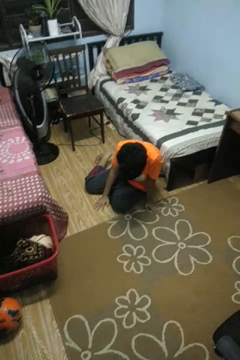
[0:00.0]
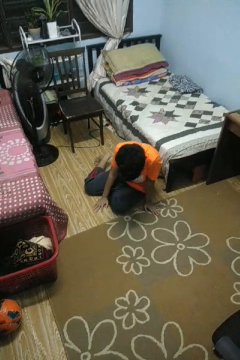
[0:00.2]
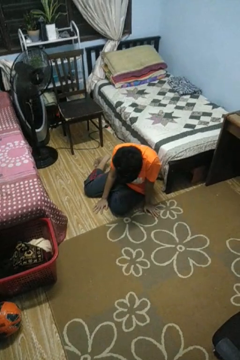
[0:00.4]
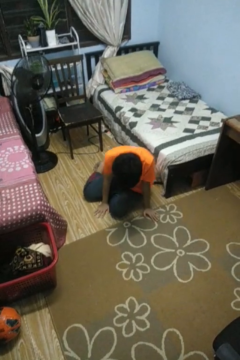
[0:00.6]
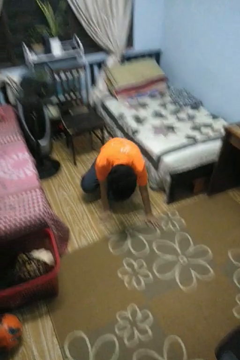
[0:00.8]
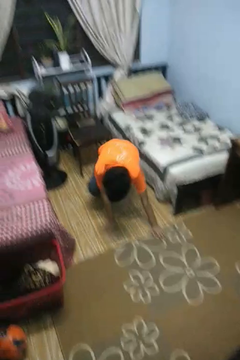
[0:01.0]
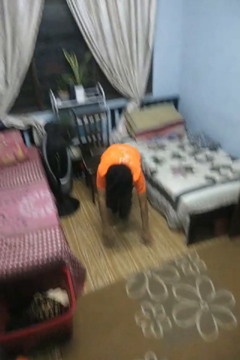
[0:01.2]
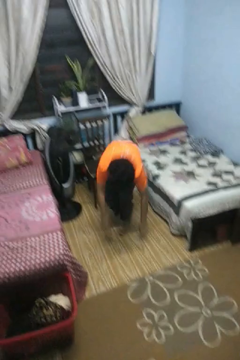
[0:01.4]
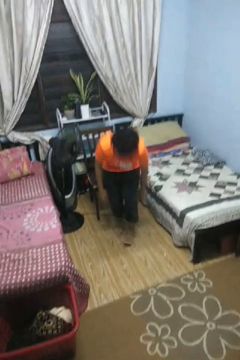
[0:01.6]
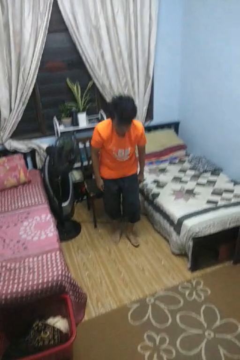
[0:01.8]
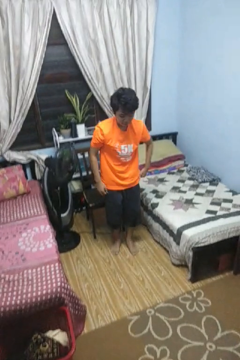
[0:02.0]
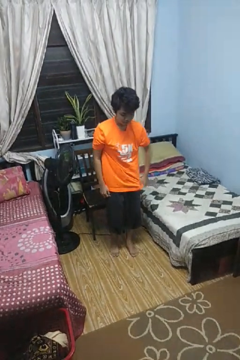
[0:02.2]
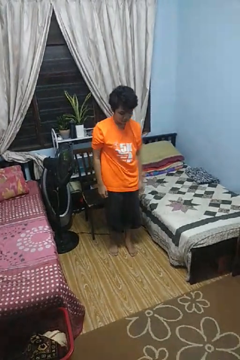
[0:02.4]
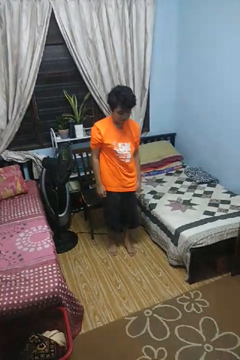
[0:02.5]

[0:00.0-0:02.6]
person stands up from floor

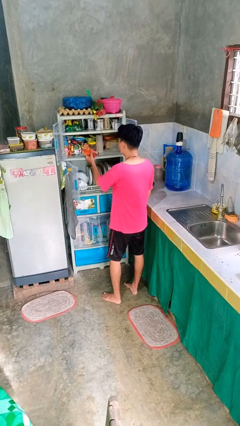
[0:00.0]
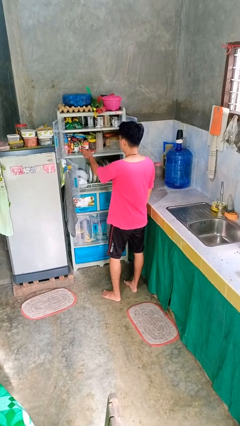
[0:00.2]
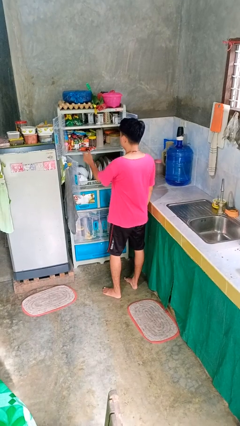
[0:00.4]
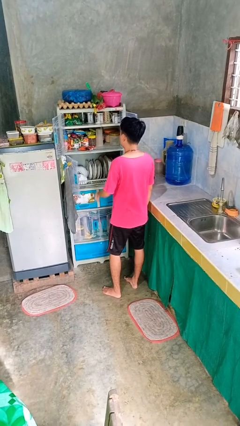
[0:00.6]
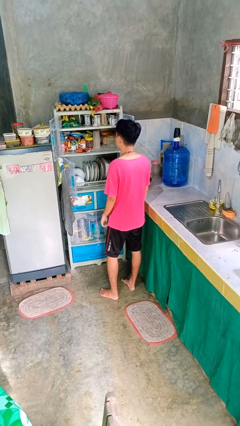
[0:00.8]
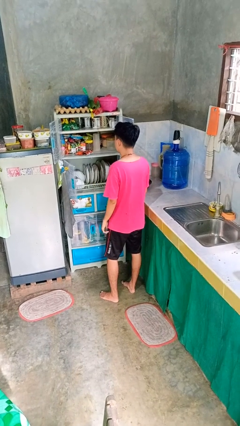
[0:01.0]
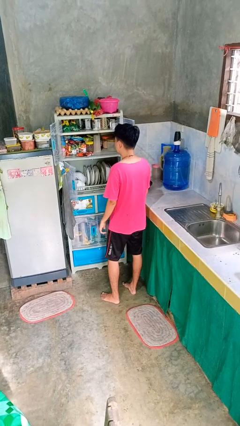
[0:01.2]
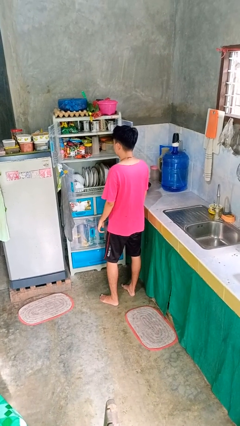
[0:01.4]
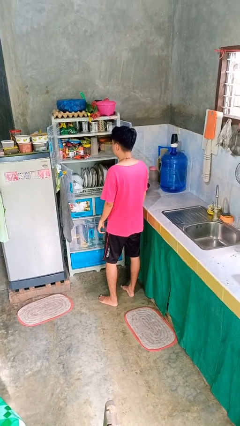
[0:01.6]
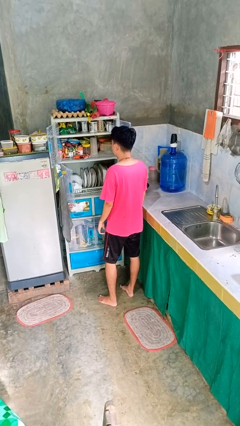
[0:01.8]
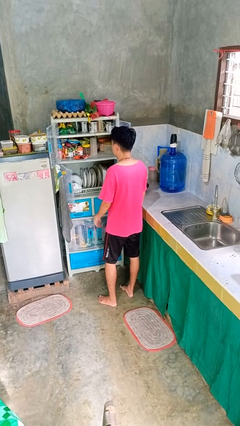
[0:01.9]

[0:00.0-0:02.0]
person puts object in cabinet

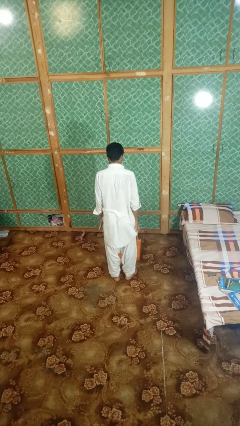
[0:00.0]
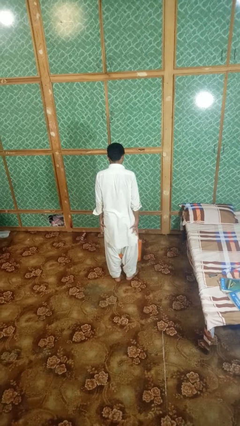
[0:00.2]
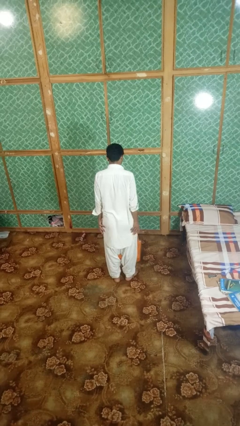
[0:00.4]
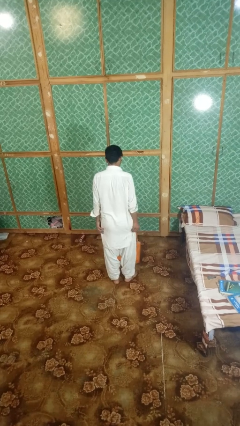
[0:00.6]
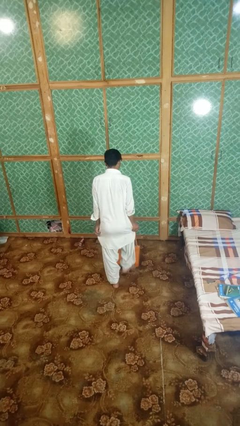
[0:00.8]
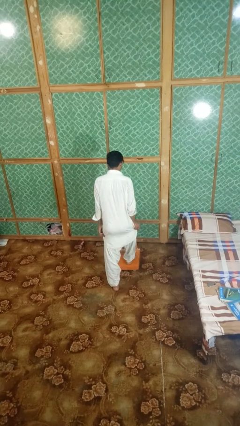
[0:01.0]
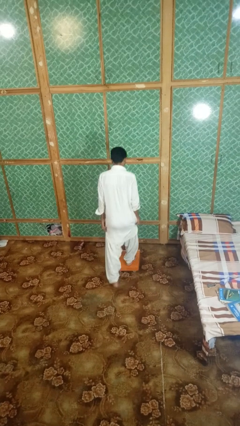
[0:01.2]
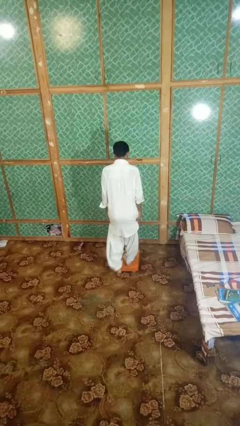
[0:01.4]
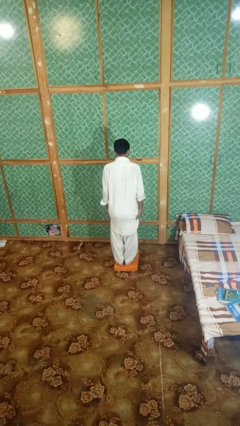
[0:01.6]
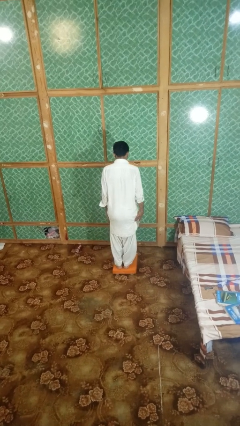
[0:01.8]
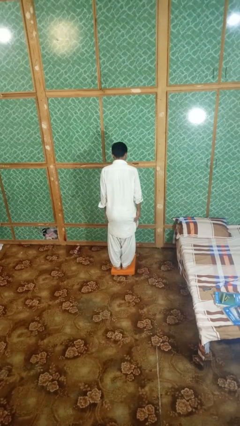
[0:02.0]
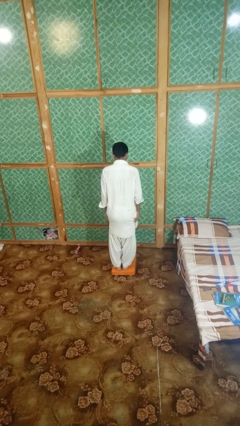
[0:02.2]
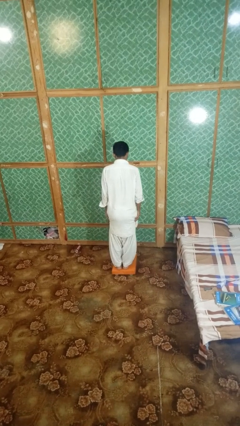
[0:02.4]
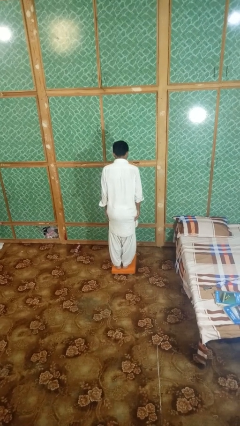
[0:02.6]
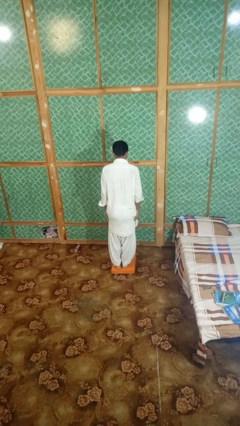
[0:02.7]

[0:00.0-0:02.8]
person uses bodyweight scale

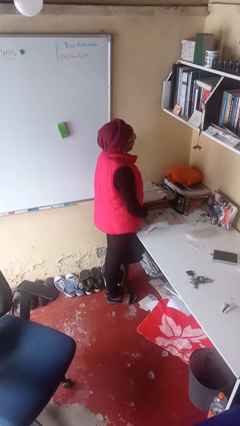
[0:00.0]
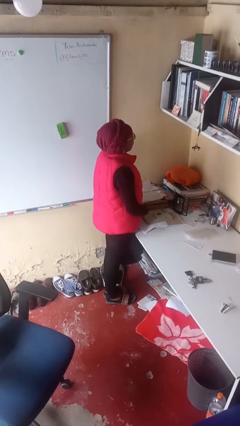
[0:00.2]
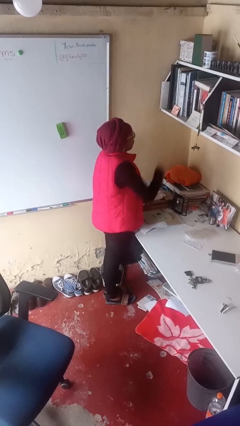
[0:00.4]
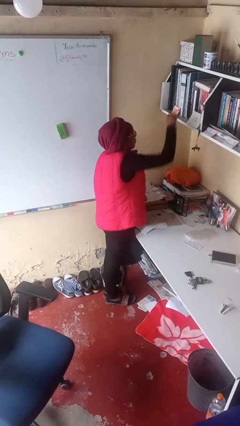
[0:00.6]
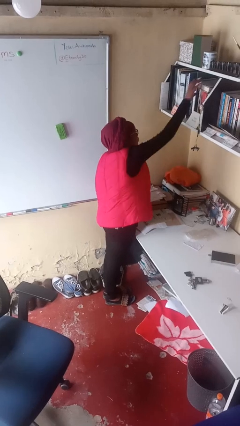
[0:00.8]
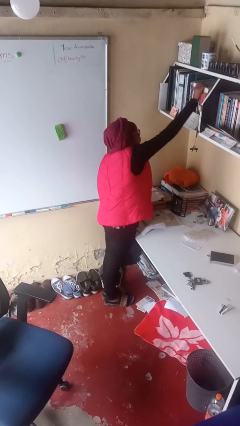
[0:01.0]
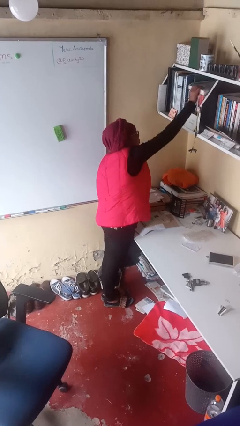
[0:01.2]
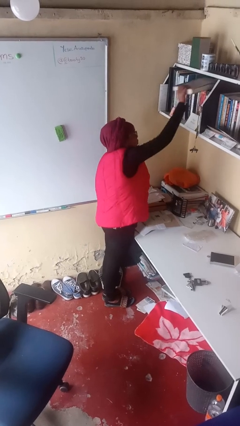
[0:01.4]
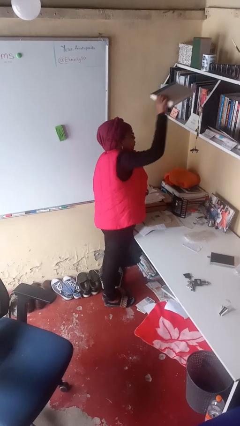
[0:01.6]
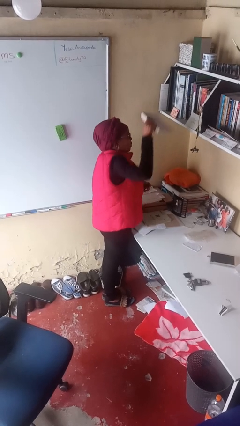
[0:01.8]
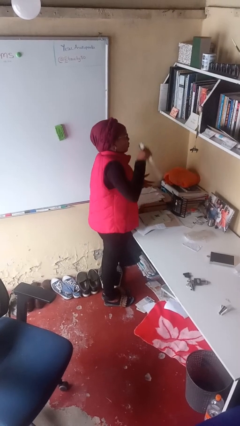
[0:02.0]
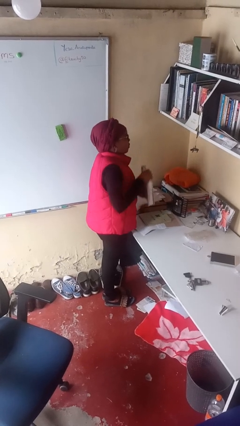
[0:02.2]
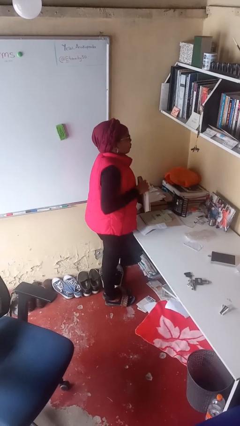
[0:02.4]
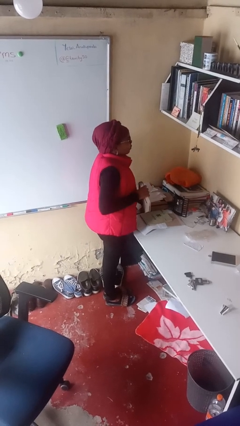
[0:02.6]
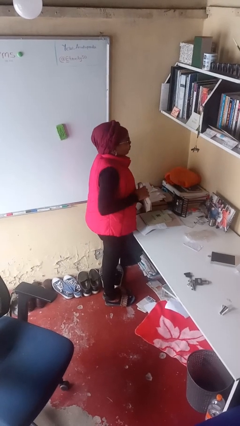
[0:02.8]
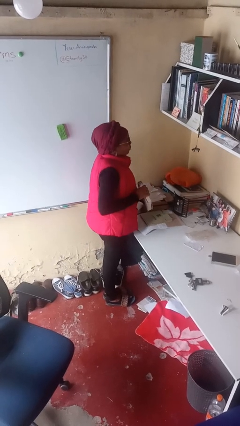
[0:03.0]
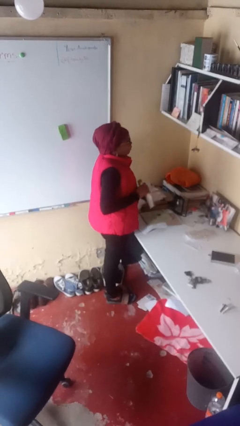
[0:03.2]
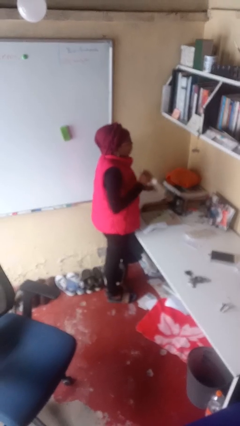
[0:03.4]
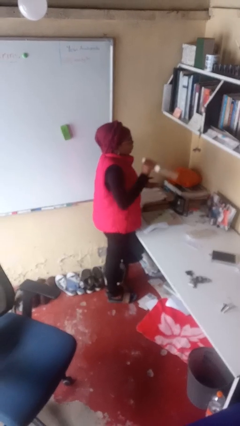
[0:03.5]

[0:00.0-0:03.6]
person picks up object from shelf

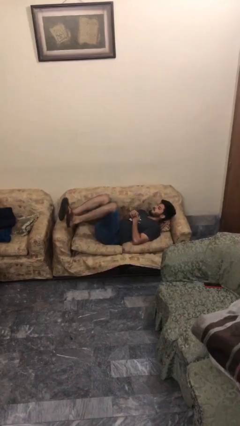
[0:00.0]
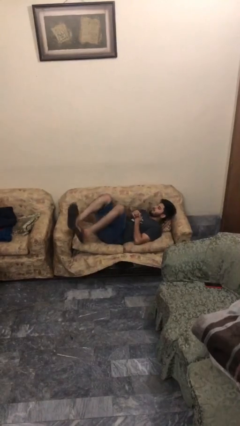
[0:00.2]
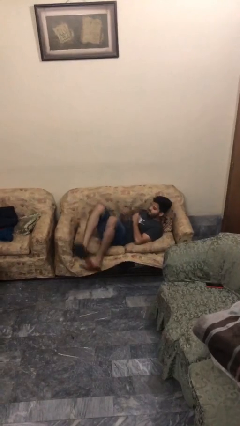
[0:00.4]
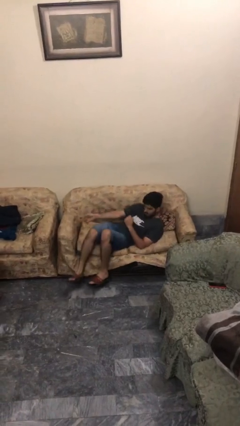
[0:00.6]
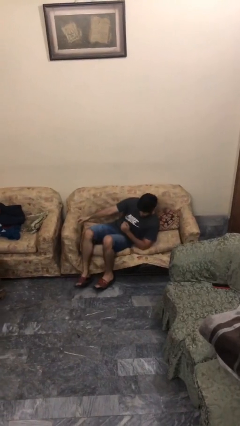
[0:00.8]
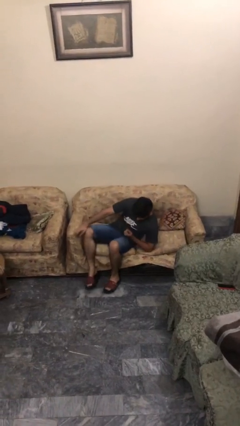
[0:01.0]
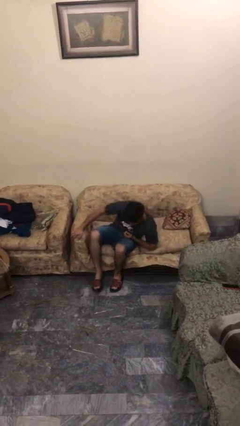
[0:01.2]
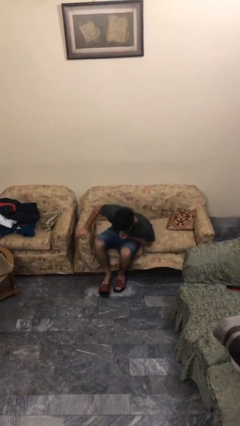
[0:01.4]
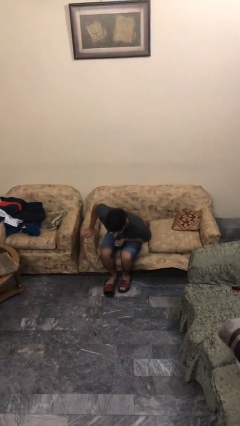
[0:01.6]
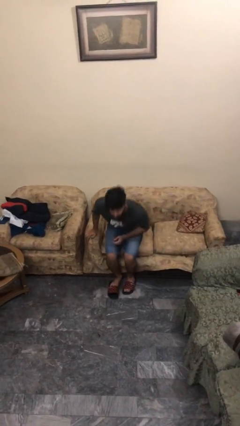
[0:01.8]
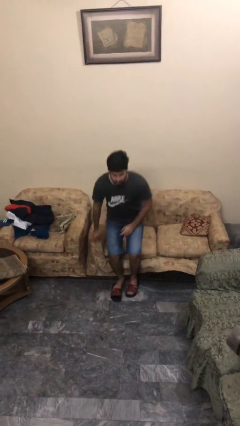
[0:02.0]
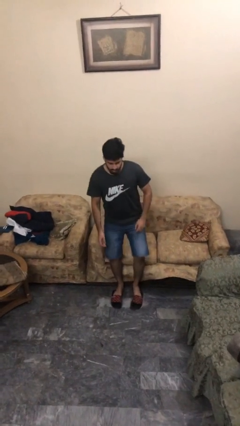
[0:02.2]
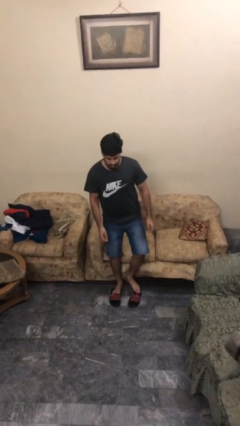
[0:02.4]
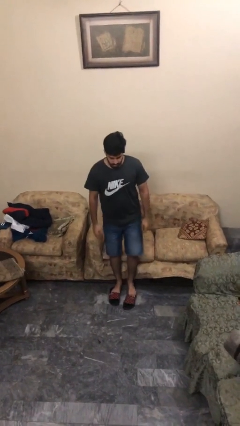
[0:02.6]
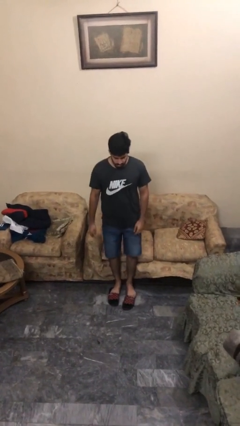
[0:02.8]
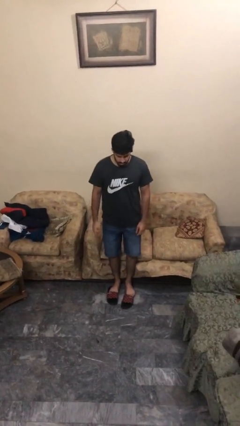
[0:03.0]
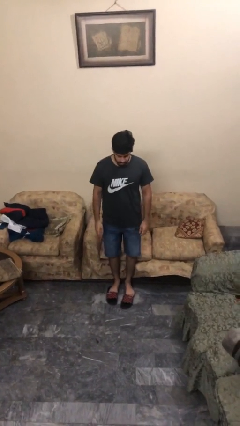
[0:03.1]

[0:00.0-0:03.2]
person stands up

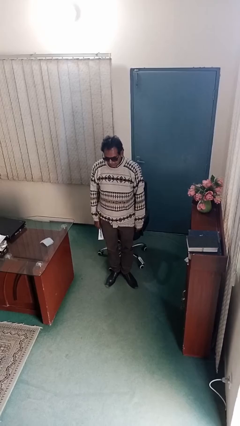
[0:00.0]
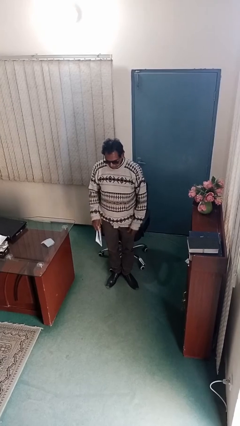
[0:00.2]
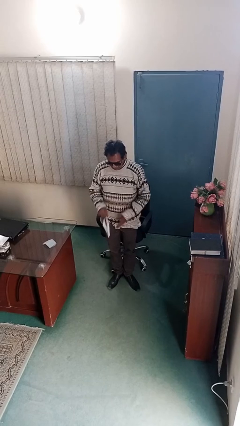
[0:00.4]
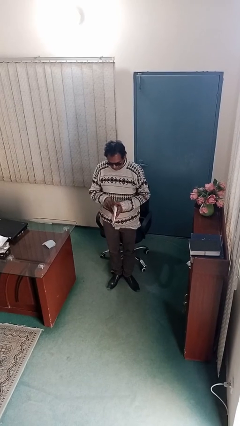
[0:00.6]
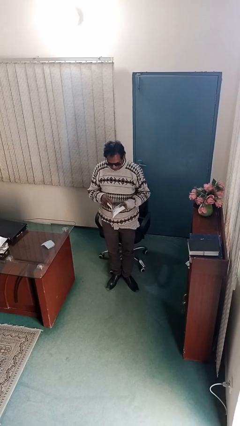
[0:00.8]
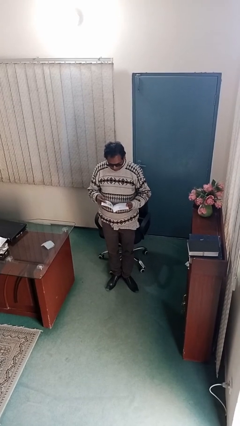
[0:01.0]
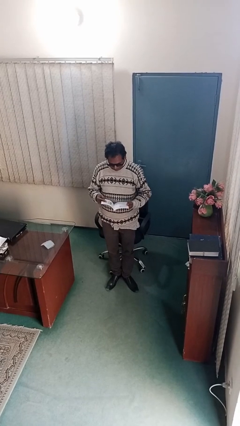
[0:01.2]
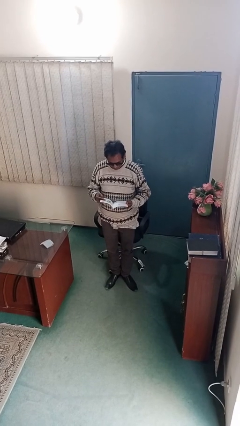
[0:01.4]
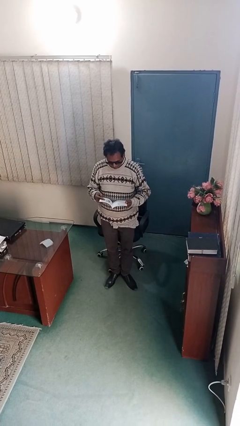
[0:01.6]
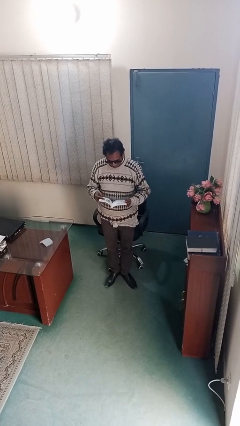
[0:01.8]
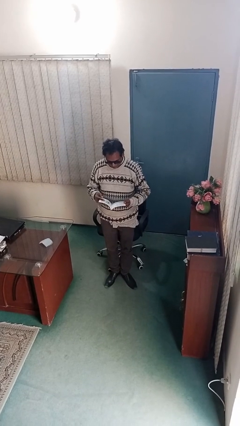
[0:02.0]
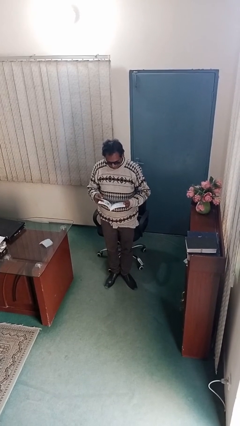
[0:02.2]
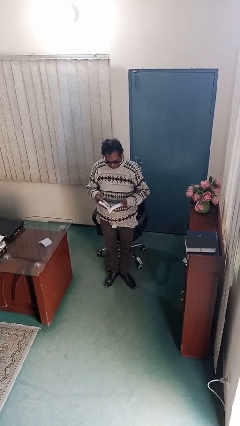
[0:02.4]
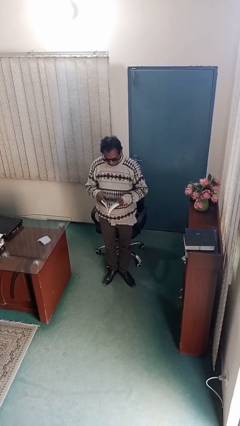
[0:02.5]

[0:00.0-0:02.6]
person reads document

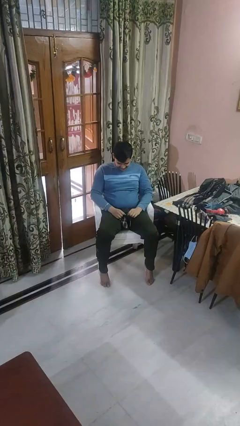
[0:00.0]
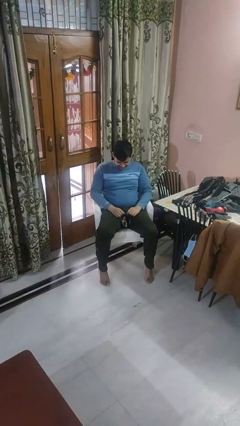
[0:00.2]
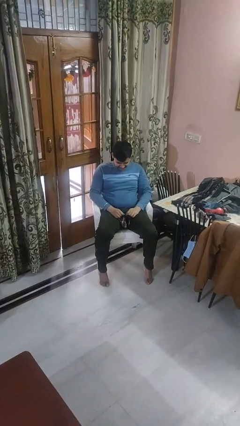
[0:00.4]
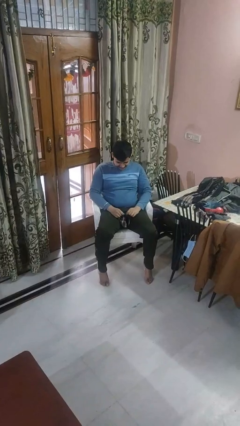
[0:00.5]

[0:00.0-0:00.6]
person takes off facemask
